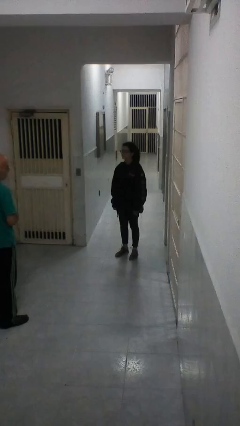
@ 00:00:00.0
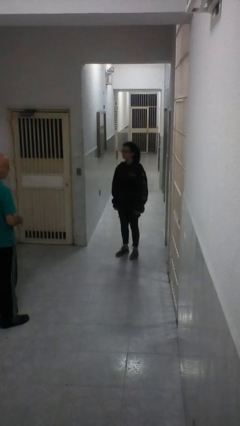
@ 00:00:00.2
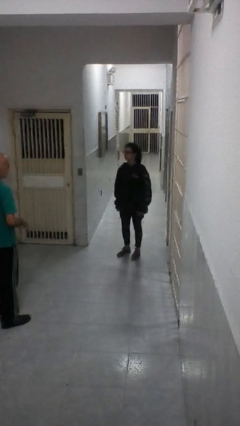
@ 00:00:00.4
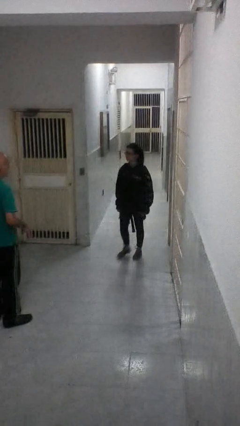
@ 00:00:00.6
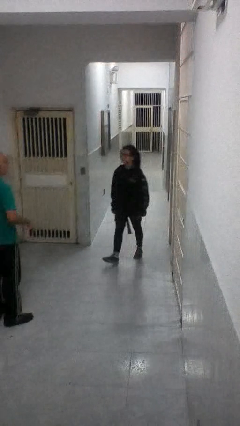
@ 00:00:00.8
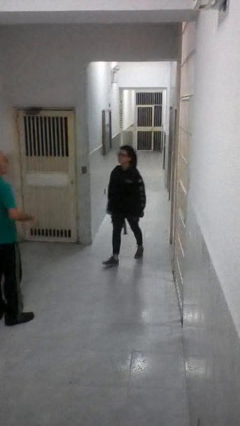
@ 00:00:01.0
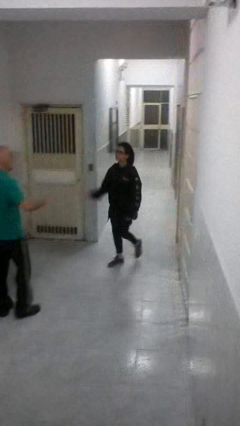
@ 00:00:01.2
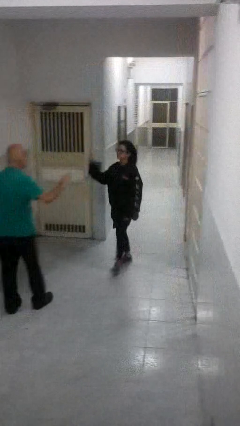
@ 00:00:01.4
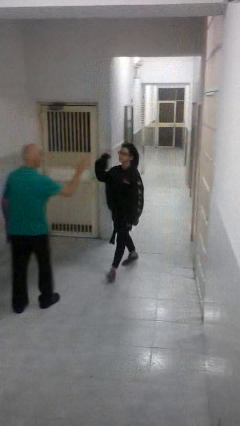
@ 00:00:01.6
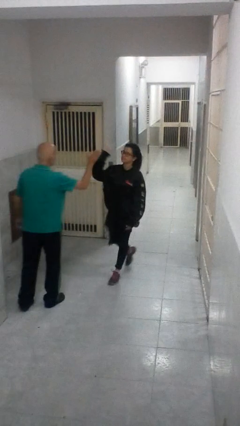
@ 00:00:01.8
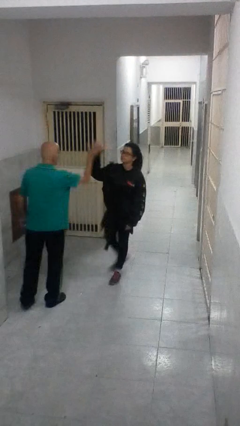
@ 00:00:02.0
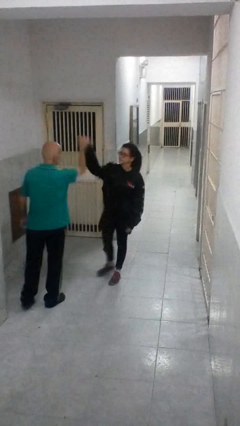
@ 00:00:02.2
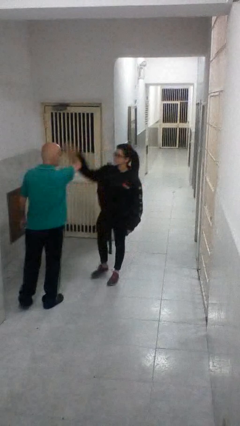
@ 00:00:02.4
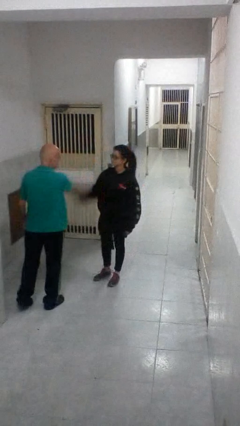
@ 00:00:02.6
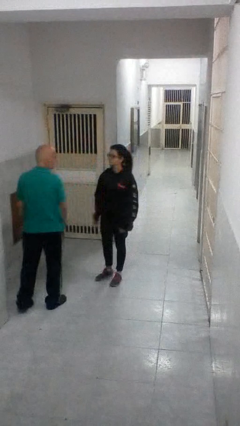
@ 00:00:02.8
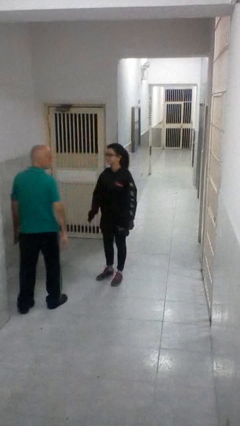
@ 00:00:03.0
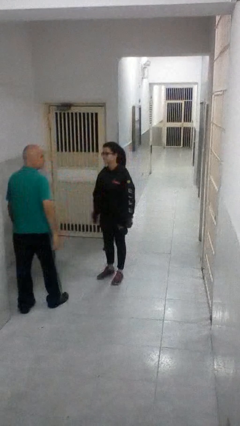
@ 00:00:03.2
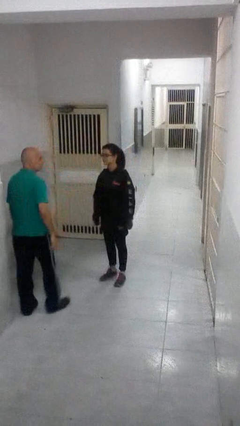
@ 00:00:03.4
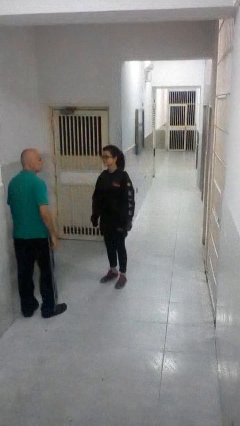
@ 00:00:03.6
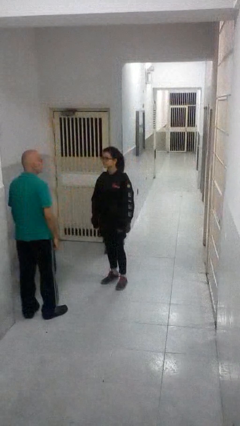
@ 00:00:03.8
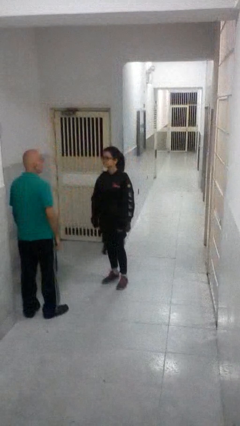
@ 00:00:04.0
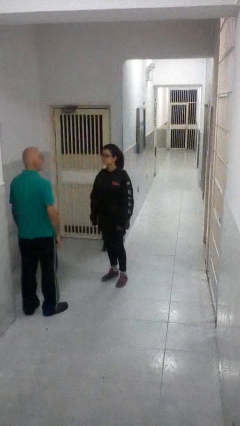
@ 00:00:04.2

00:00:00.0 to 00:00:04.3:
person highfives hand

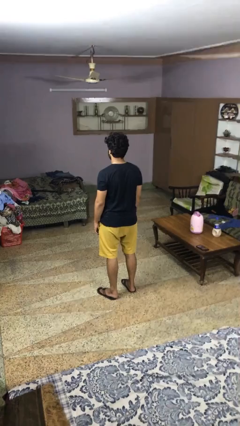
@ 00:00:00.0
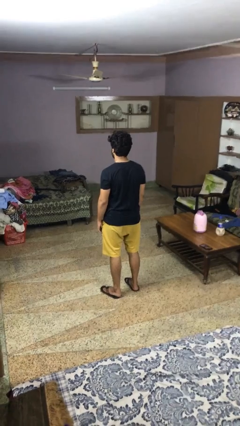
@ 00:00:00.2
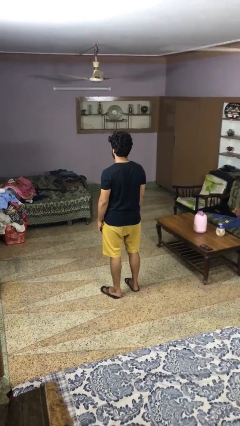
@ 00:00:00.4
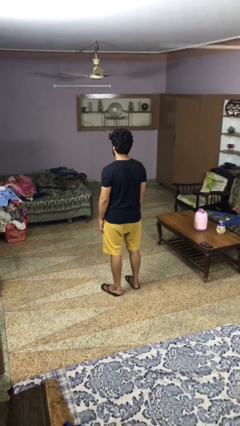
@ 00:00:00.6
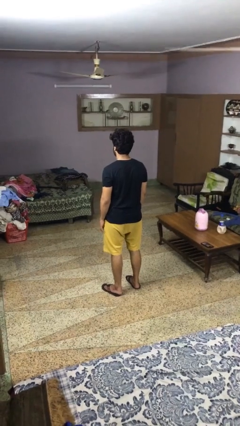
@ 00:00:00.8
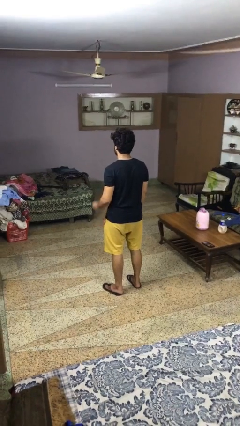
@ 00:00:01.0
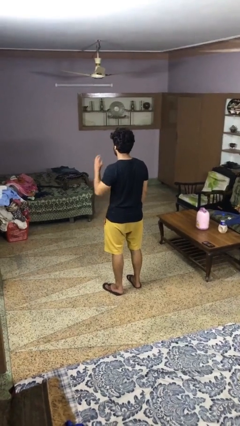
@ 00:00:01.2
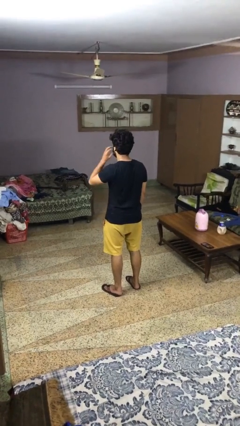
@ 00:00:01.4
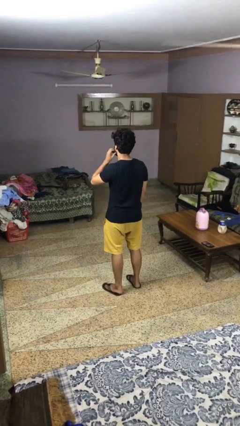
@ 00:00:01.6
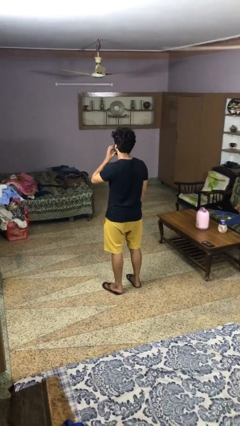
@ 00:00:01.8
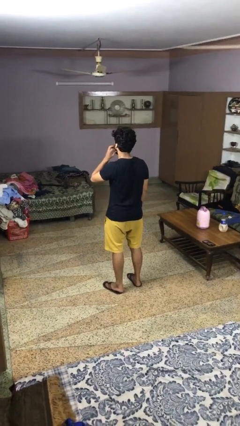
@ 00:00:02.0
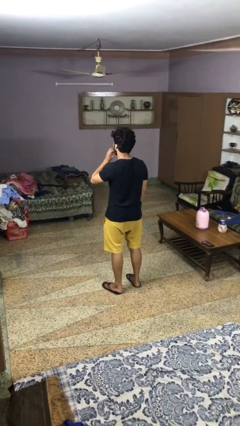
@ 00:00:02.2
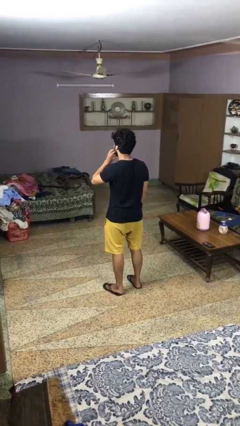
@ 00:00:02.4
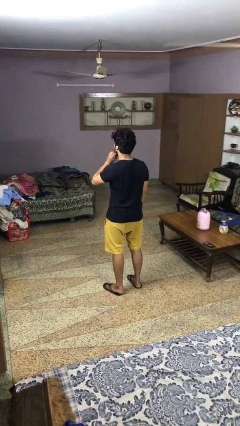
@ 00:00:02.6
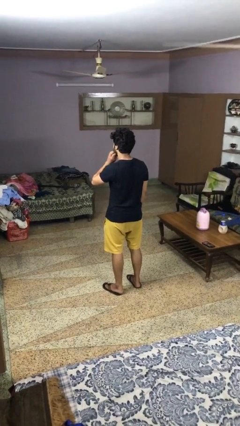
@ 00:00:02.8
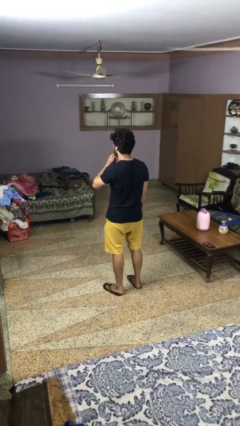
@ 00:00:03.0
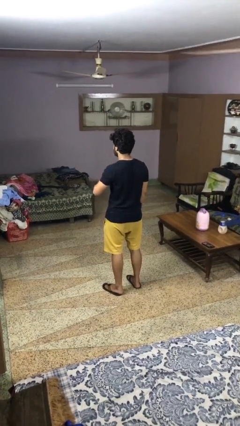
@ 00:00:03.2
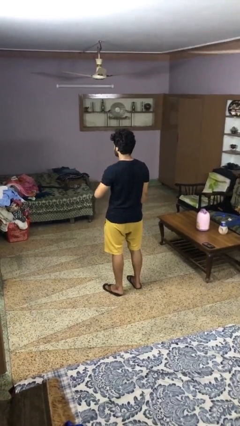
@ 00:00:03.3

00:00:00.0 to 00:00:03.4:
person scratches face

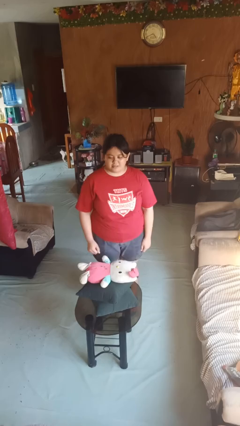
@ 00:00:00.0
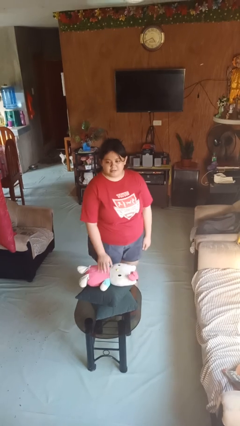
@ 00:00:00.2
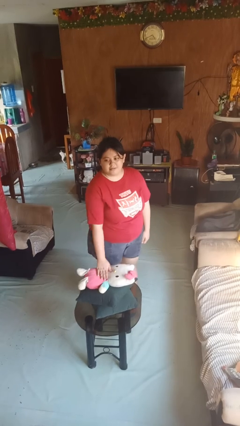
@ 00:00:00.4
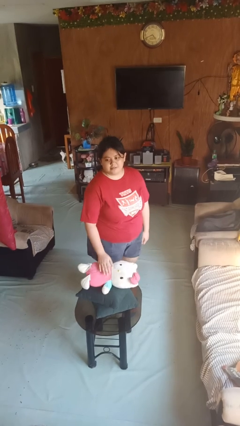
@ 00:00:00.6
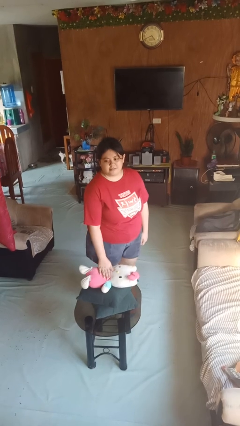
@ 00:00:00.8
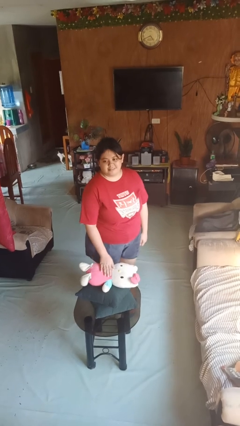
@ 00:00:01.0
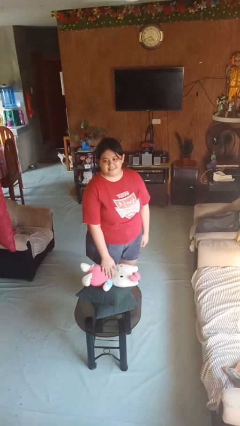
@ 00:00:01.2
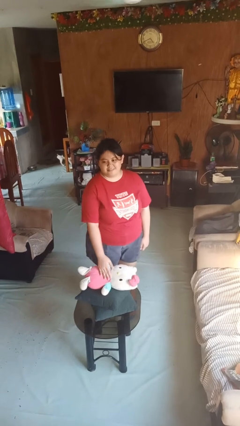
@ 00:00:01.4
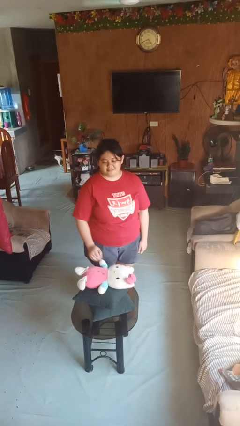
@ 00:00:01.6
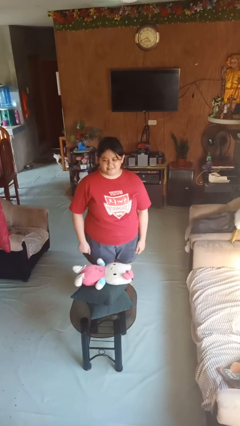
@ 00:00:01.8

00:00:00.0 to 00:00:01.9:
person taps object with finger

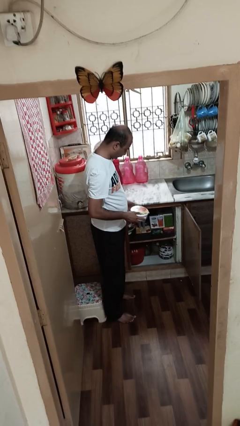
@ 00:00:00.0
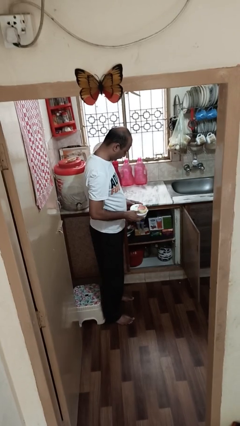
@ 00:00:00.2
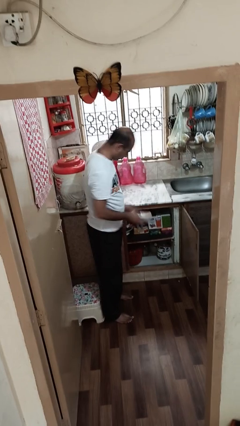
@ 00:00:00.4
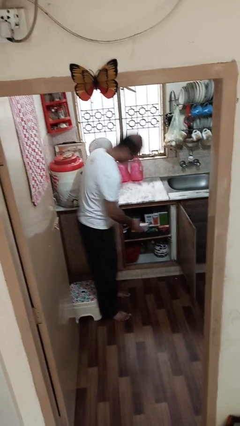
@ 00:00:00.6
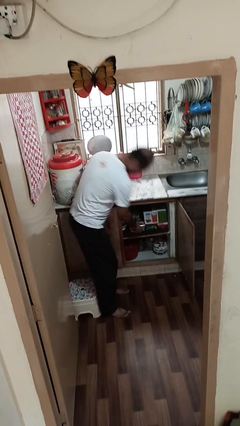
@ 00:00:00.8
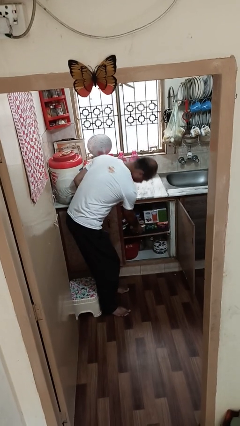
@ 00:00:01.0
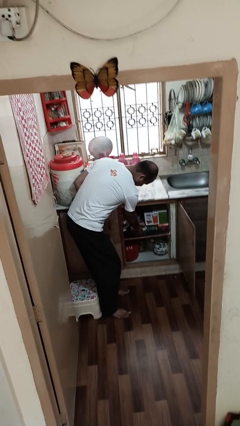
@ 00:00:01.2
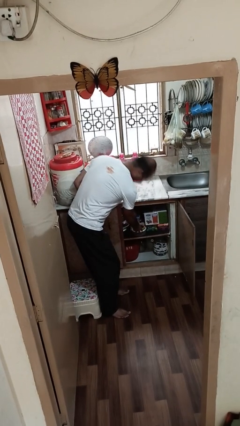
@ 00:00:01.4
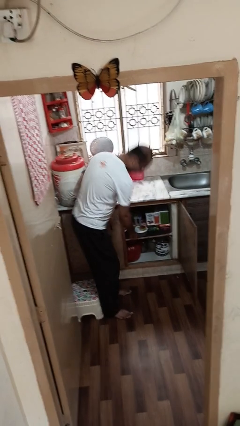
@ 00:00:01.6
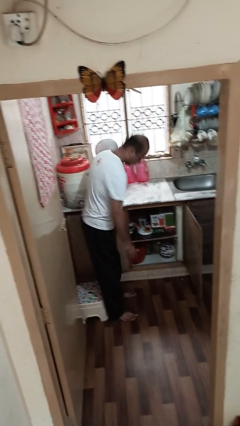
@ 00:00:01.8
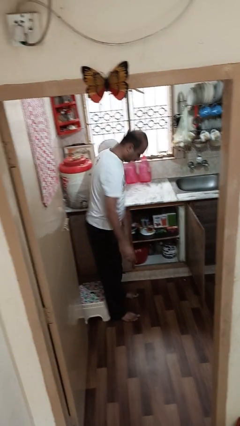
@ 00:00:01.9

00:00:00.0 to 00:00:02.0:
person puts down object into cabinet

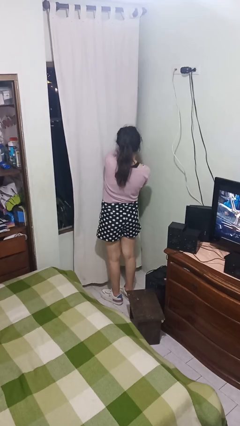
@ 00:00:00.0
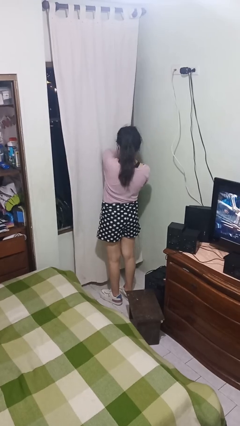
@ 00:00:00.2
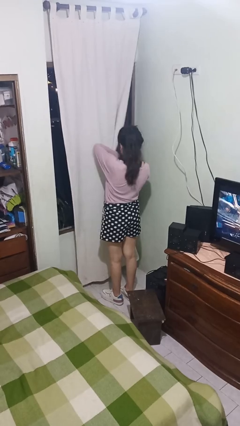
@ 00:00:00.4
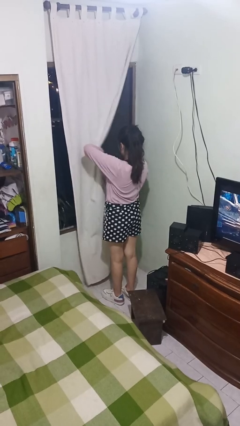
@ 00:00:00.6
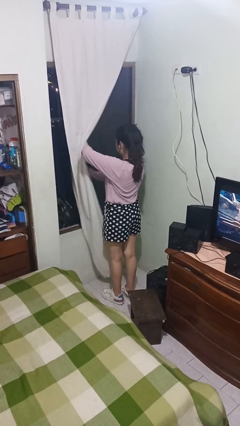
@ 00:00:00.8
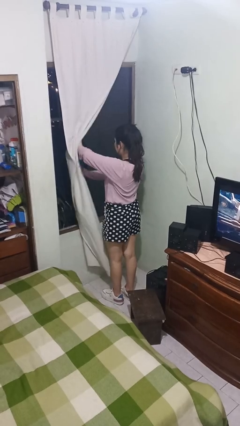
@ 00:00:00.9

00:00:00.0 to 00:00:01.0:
person opens curtains

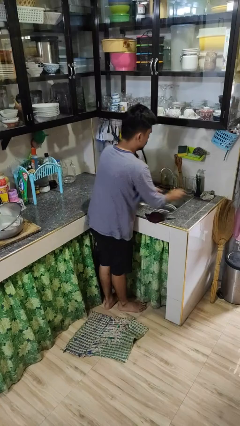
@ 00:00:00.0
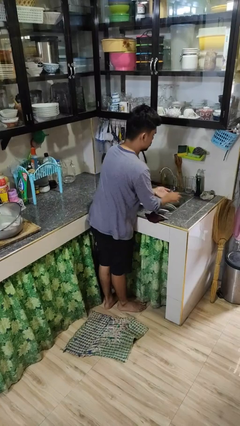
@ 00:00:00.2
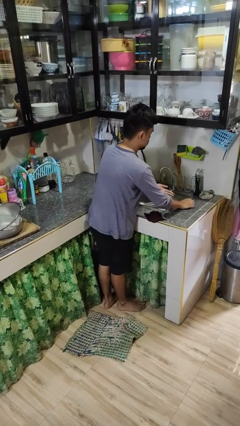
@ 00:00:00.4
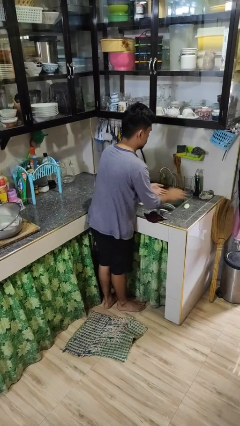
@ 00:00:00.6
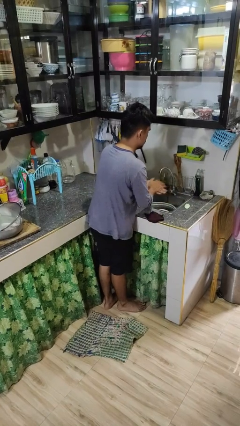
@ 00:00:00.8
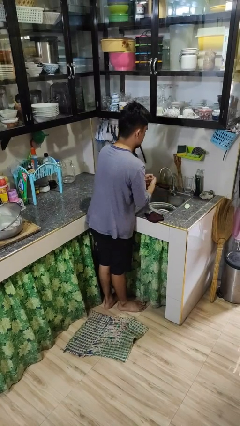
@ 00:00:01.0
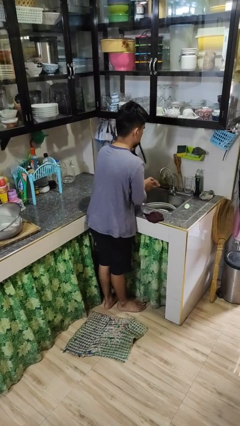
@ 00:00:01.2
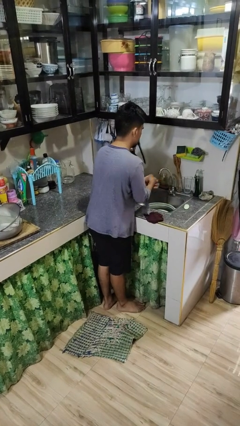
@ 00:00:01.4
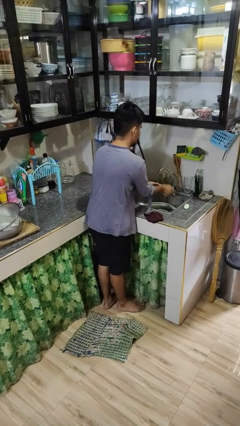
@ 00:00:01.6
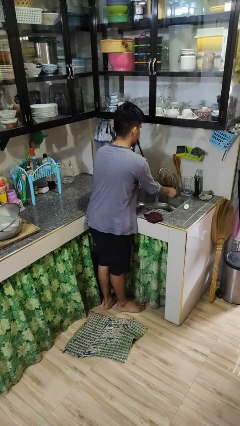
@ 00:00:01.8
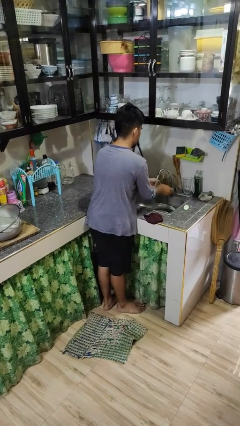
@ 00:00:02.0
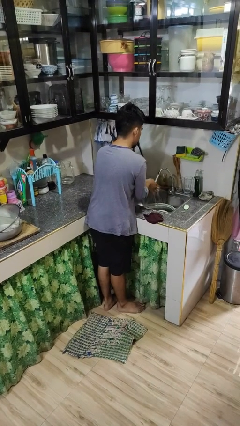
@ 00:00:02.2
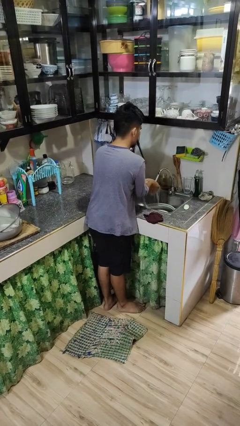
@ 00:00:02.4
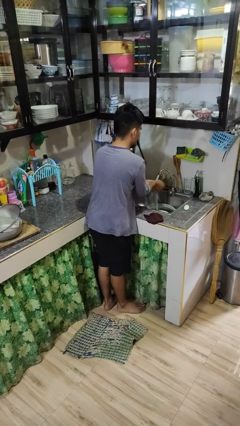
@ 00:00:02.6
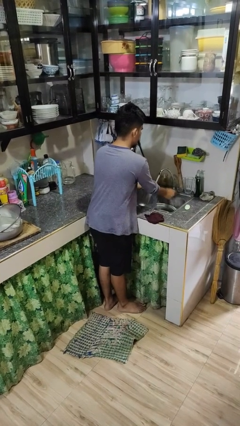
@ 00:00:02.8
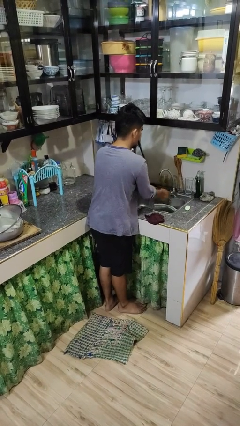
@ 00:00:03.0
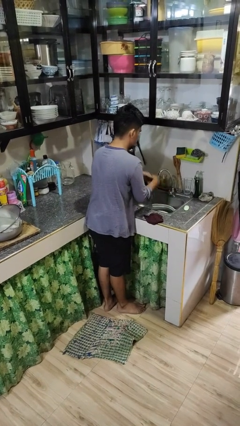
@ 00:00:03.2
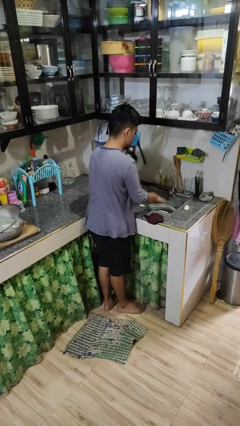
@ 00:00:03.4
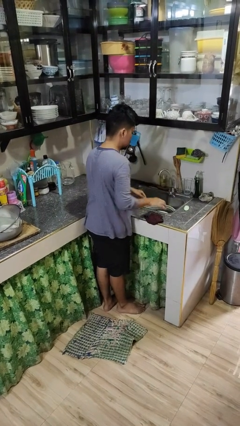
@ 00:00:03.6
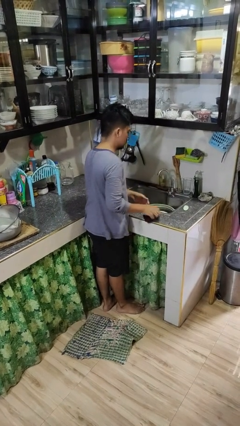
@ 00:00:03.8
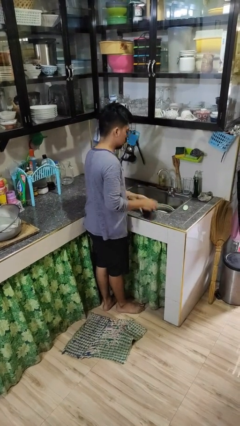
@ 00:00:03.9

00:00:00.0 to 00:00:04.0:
person washes hands
